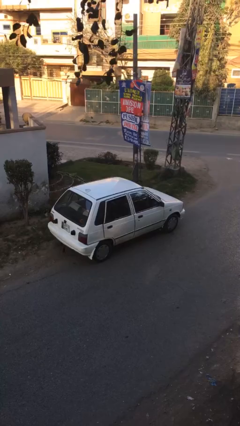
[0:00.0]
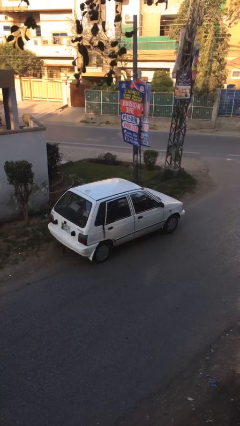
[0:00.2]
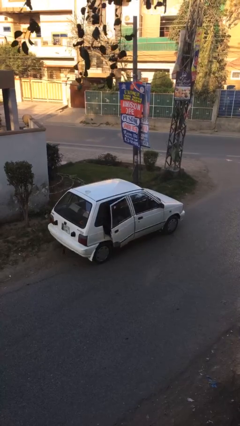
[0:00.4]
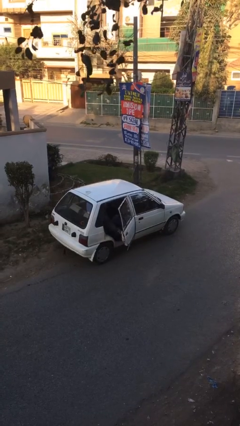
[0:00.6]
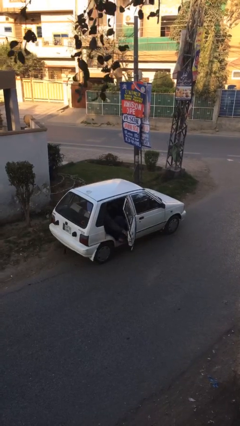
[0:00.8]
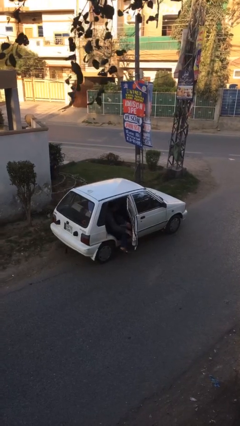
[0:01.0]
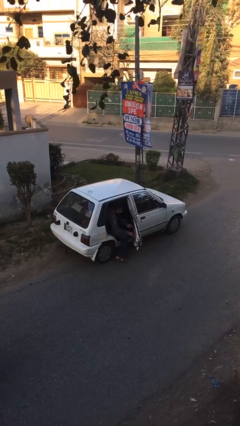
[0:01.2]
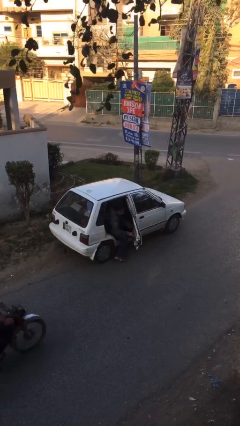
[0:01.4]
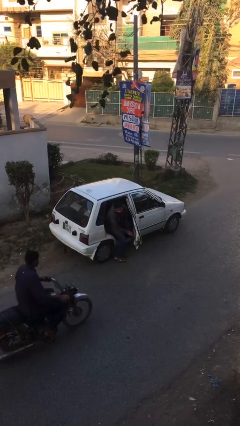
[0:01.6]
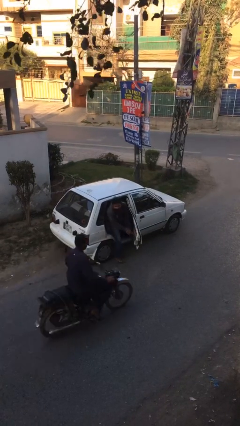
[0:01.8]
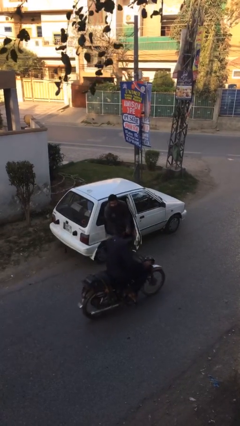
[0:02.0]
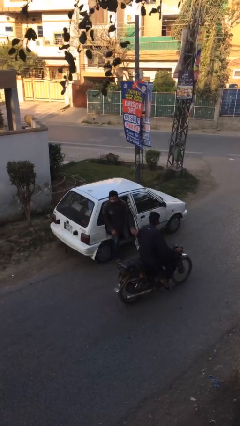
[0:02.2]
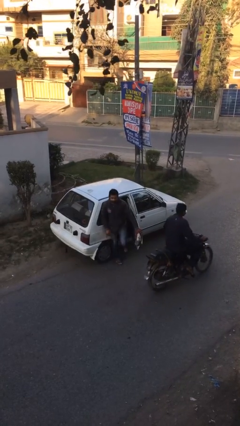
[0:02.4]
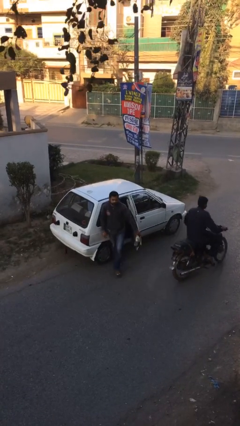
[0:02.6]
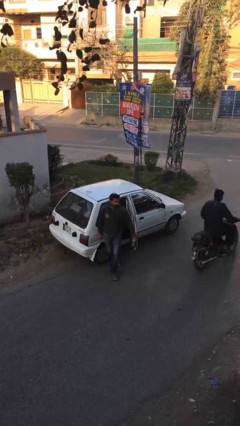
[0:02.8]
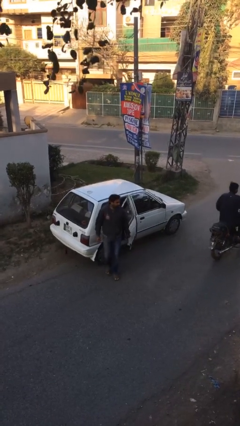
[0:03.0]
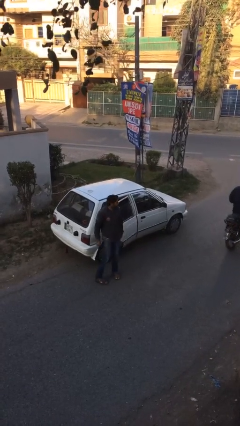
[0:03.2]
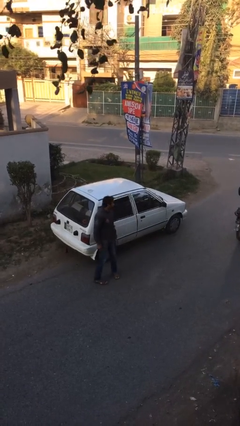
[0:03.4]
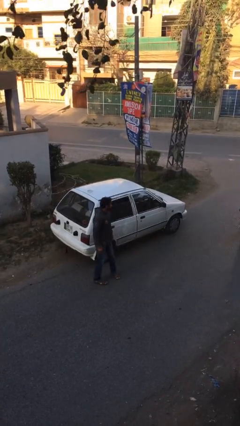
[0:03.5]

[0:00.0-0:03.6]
car drops off person

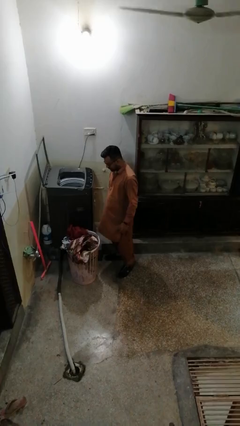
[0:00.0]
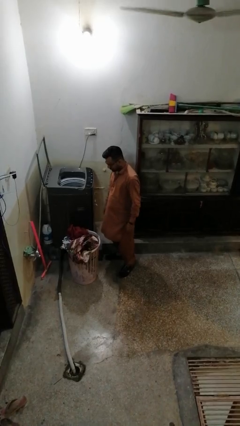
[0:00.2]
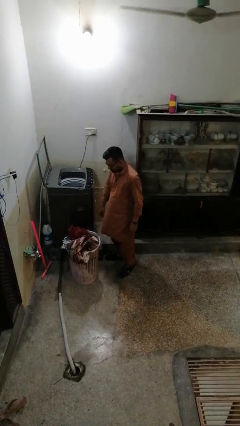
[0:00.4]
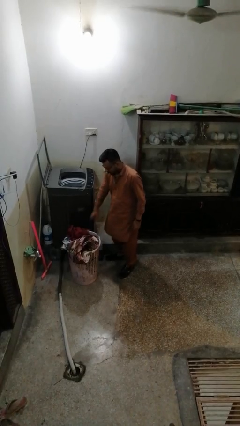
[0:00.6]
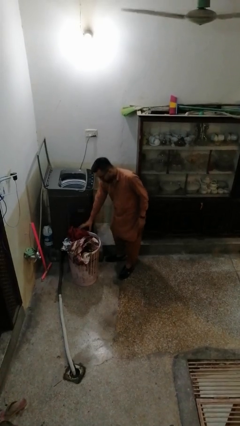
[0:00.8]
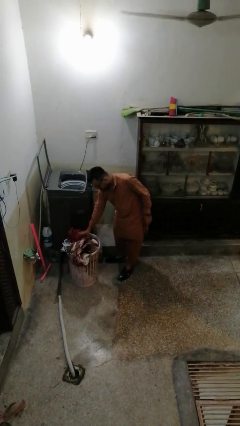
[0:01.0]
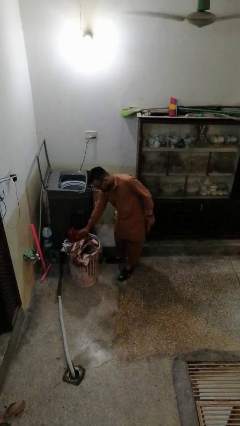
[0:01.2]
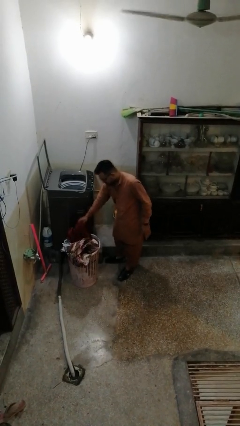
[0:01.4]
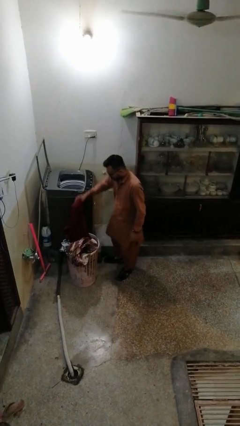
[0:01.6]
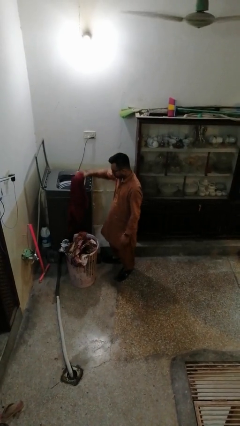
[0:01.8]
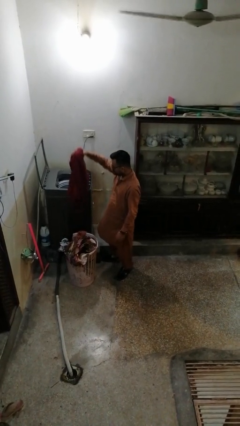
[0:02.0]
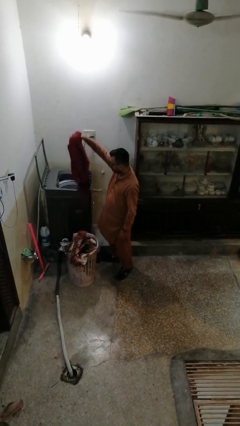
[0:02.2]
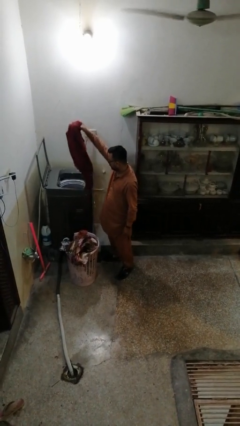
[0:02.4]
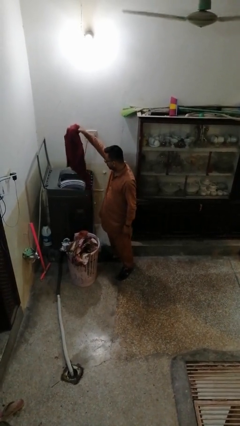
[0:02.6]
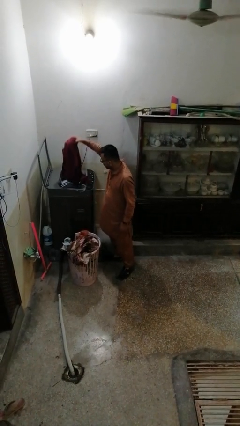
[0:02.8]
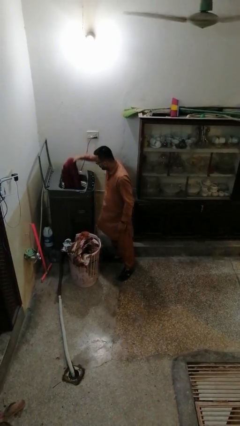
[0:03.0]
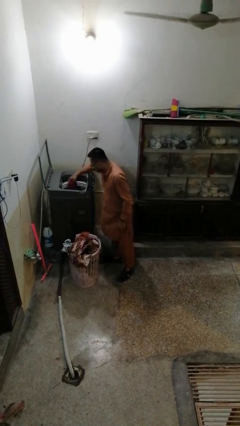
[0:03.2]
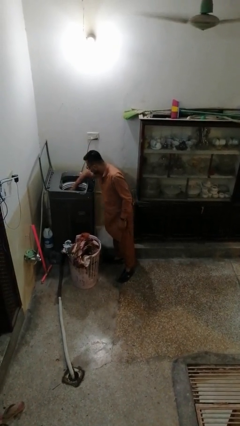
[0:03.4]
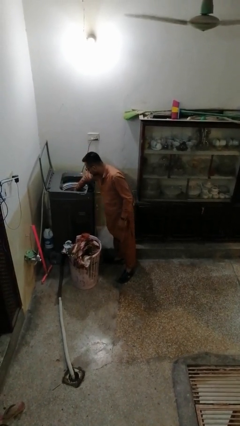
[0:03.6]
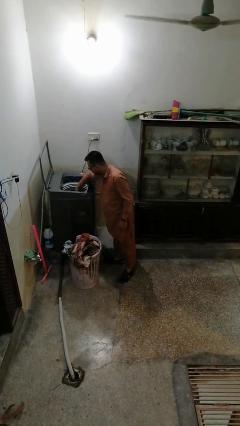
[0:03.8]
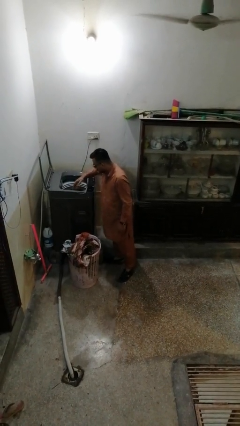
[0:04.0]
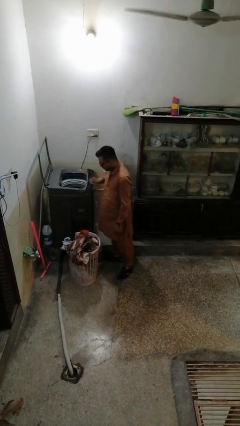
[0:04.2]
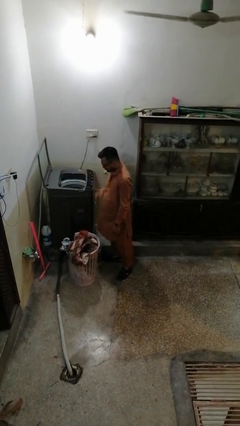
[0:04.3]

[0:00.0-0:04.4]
person loads dryer

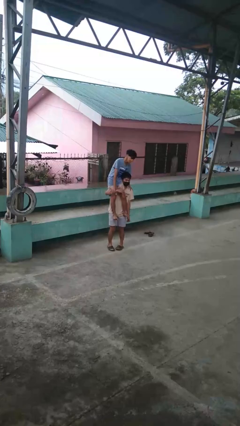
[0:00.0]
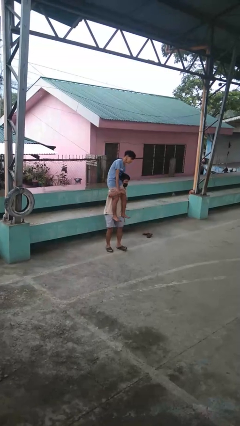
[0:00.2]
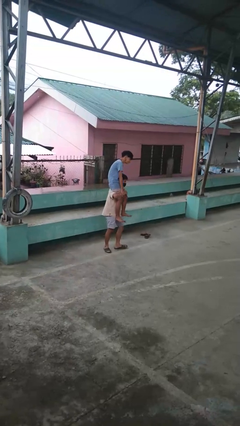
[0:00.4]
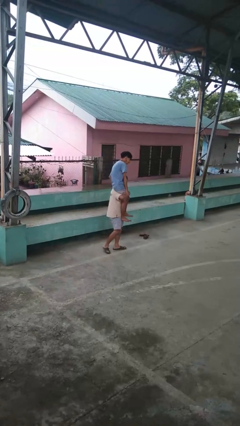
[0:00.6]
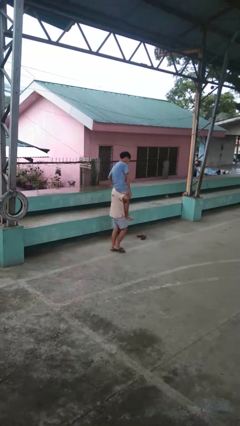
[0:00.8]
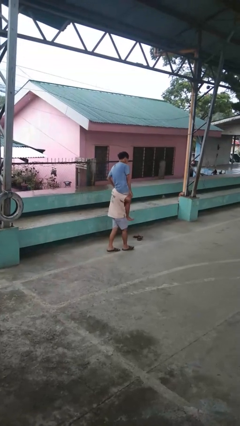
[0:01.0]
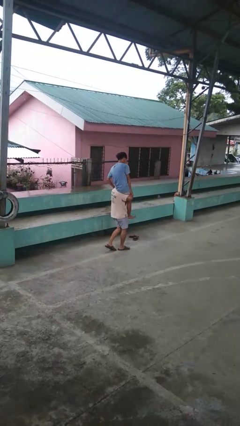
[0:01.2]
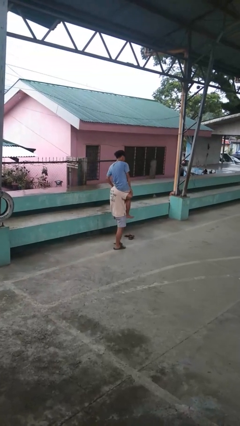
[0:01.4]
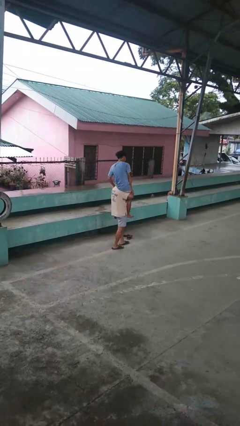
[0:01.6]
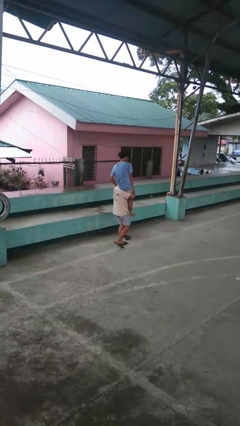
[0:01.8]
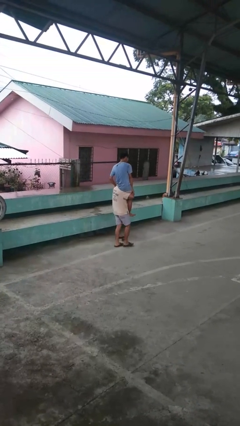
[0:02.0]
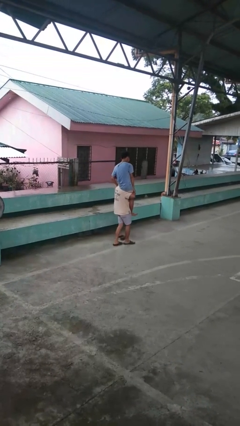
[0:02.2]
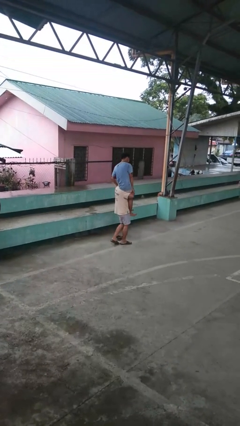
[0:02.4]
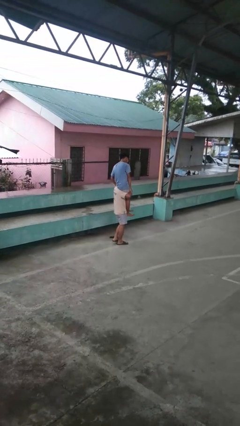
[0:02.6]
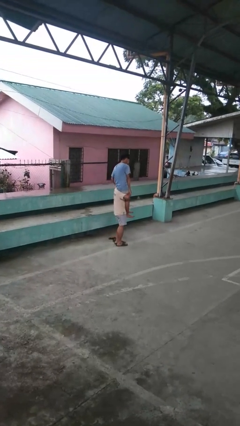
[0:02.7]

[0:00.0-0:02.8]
person carries person on shoulders

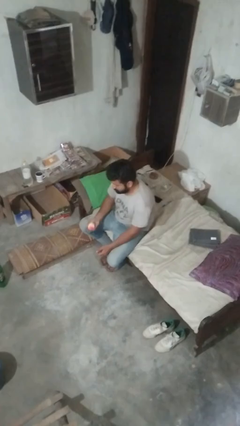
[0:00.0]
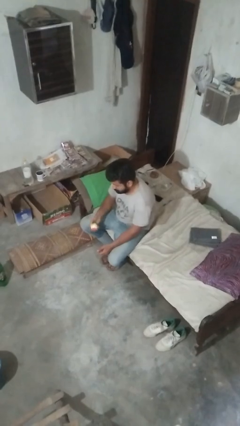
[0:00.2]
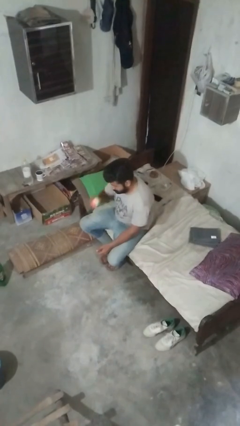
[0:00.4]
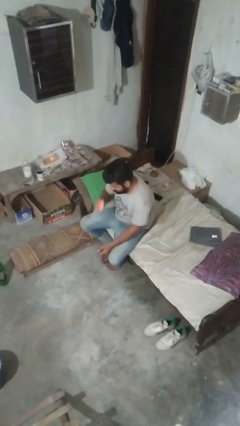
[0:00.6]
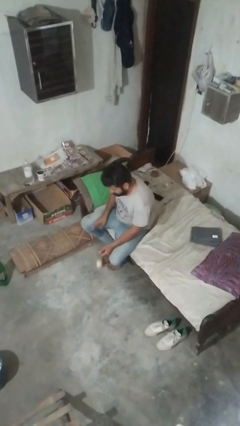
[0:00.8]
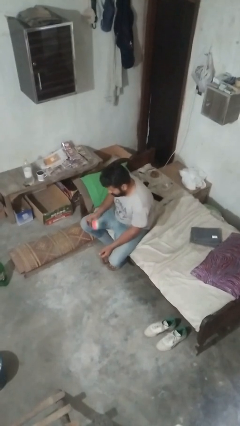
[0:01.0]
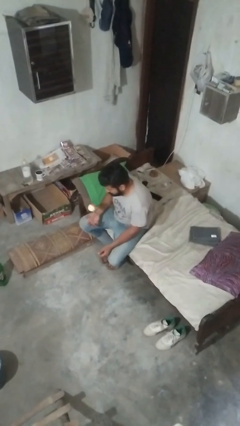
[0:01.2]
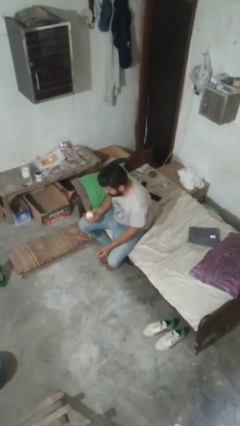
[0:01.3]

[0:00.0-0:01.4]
person bounces ball on floor

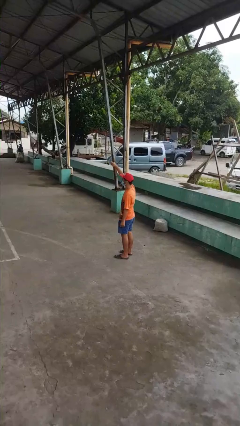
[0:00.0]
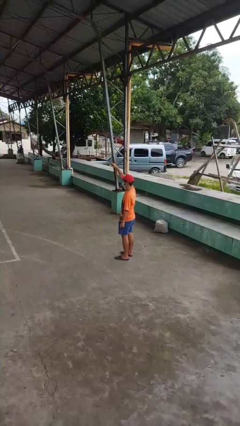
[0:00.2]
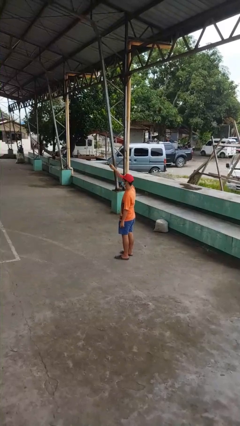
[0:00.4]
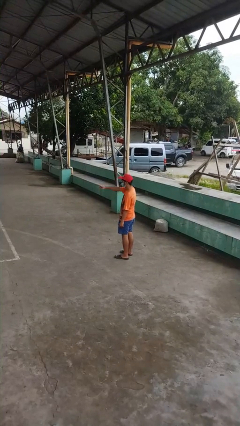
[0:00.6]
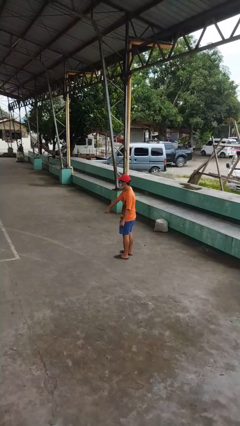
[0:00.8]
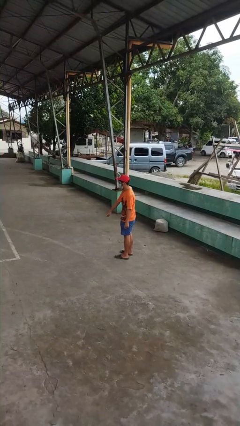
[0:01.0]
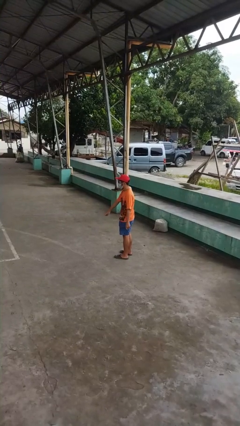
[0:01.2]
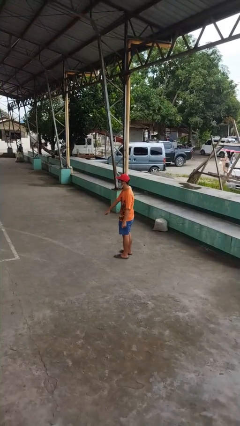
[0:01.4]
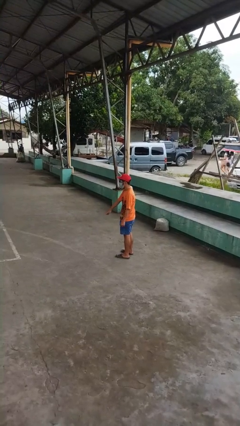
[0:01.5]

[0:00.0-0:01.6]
person gestures swipe down

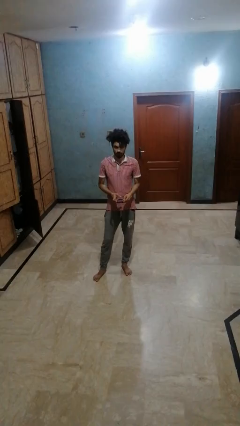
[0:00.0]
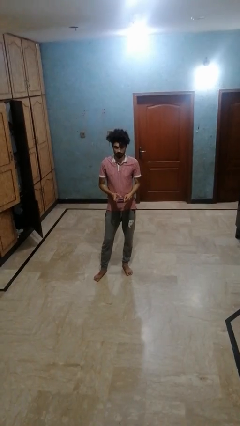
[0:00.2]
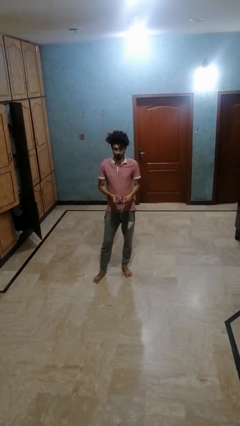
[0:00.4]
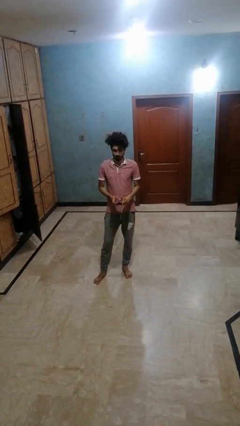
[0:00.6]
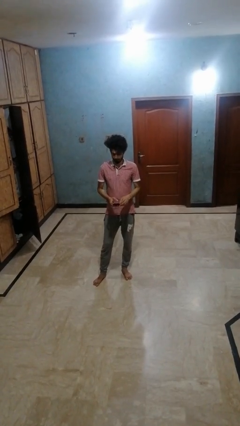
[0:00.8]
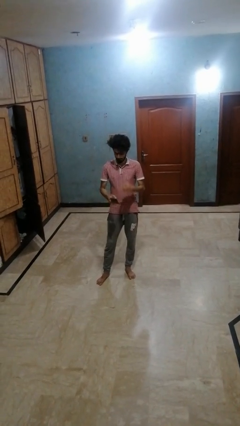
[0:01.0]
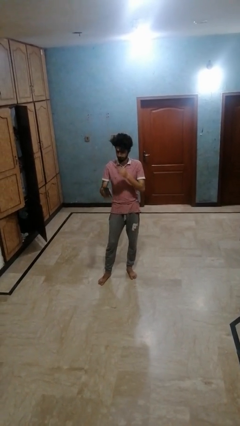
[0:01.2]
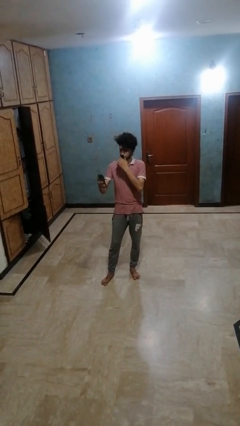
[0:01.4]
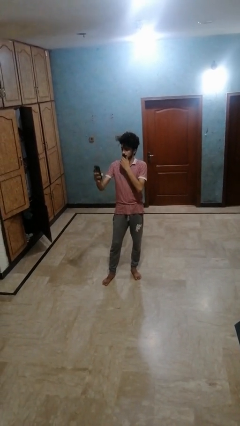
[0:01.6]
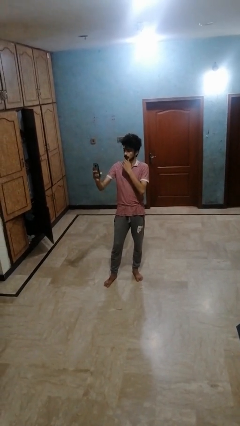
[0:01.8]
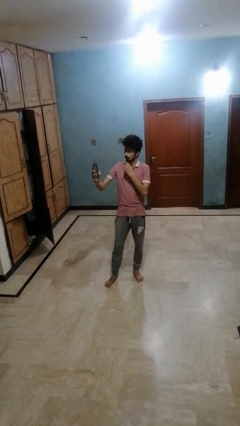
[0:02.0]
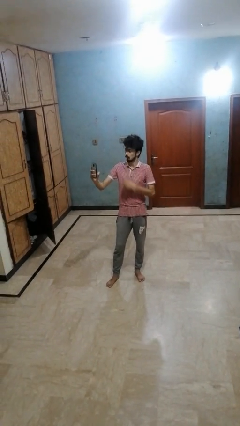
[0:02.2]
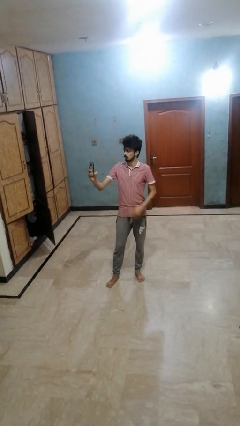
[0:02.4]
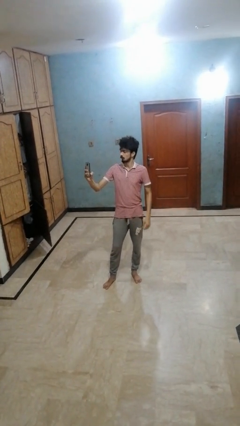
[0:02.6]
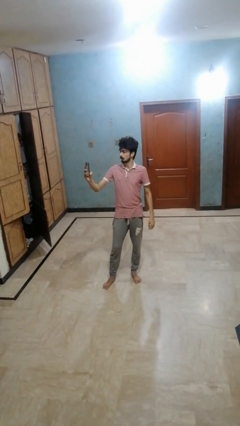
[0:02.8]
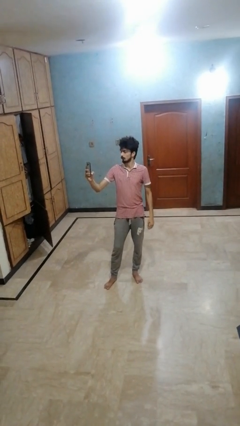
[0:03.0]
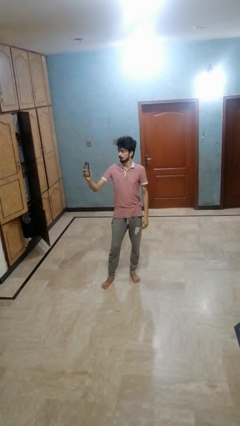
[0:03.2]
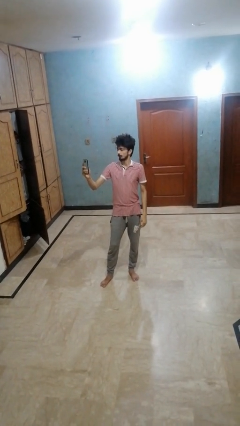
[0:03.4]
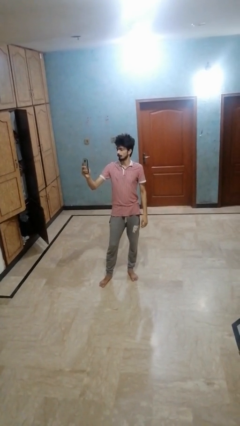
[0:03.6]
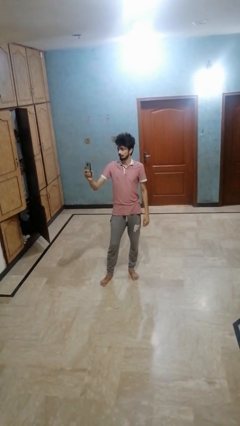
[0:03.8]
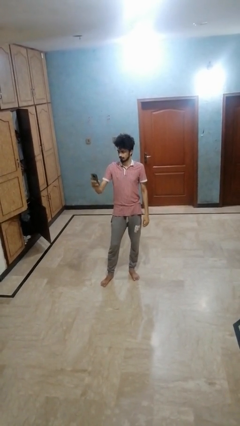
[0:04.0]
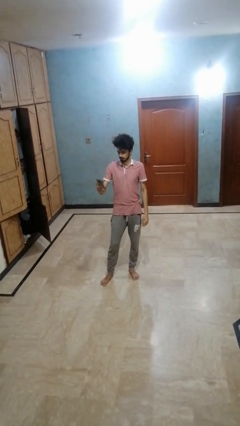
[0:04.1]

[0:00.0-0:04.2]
person takes selfie
